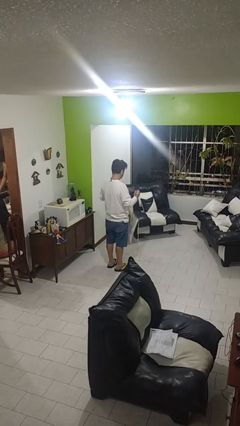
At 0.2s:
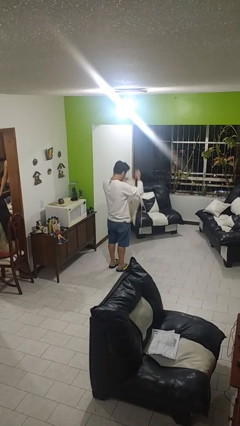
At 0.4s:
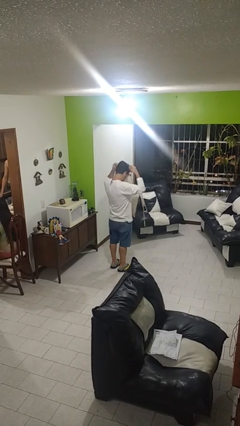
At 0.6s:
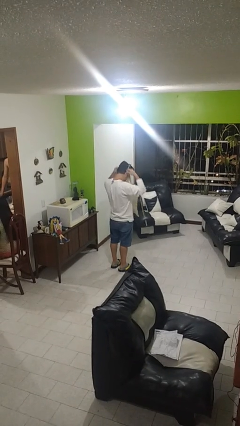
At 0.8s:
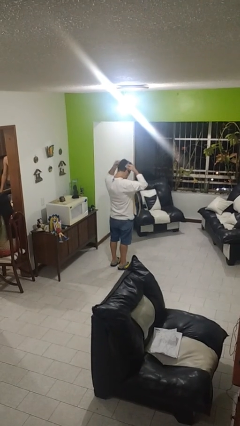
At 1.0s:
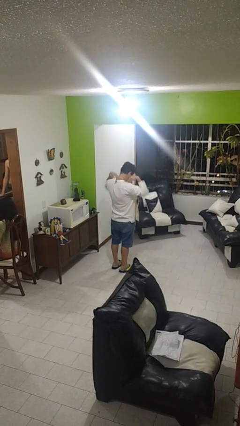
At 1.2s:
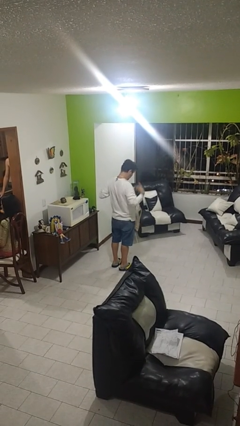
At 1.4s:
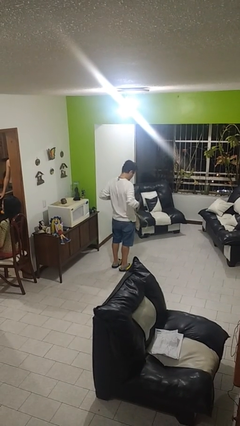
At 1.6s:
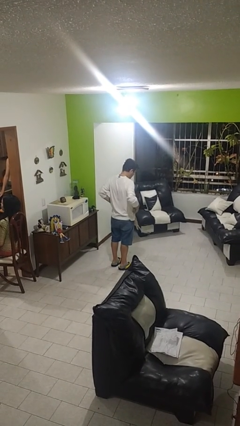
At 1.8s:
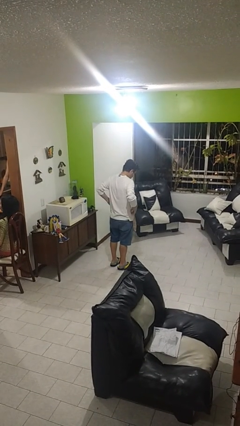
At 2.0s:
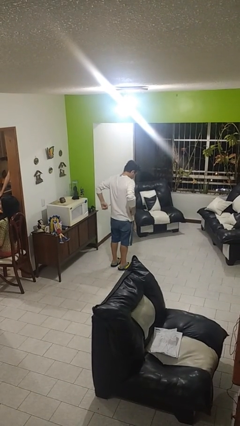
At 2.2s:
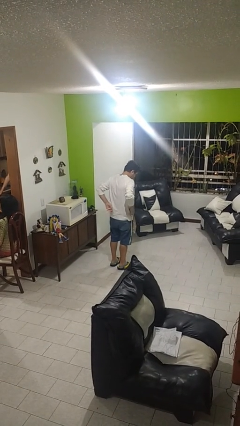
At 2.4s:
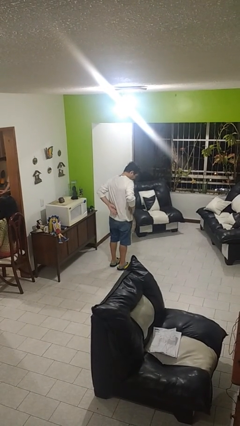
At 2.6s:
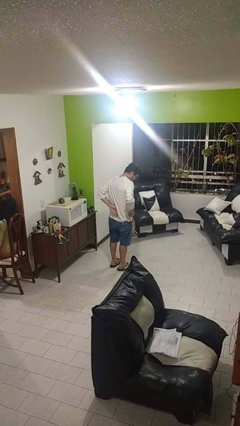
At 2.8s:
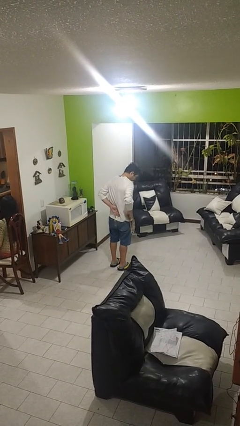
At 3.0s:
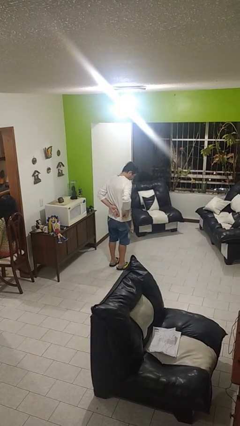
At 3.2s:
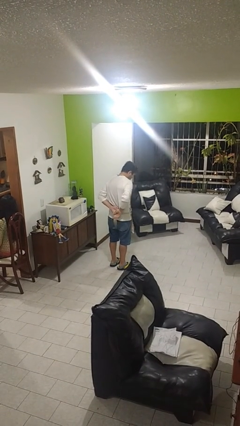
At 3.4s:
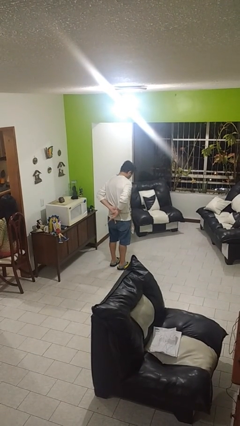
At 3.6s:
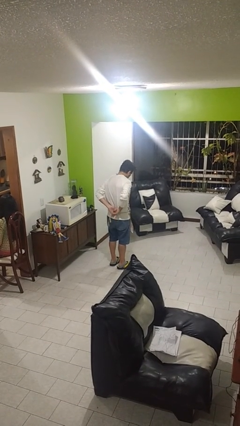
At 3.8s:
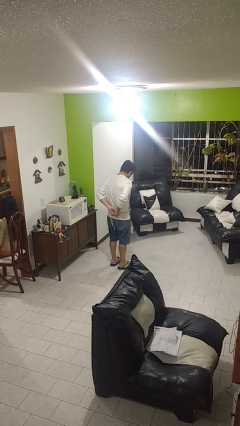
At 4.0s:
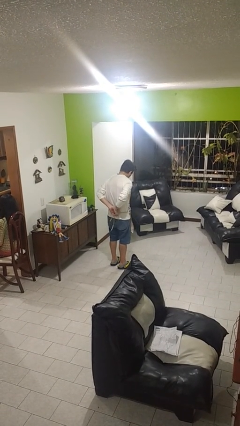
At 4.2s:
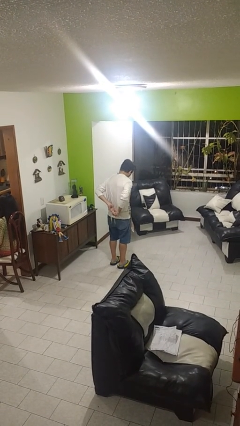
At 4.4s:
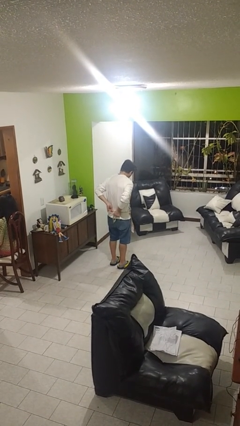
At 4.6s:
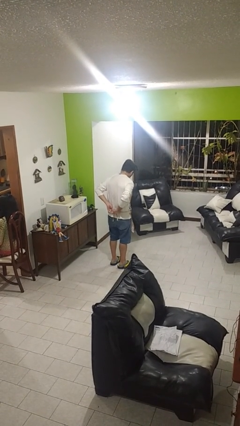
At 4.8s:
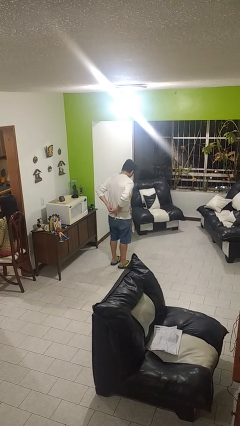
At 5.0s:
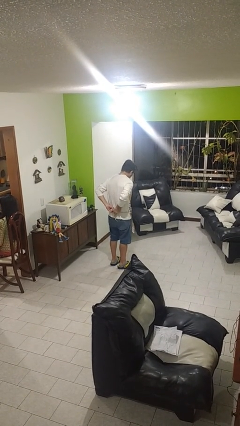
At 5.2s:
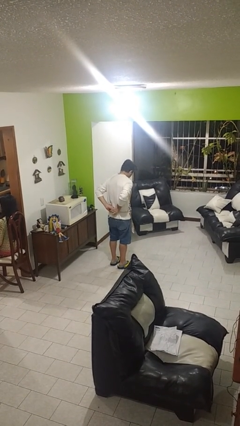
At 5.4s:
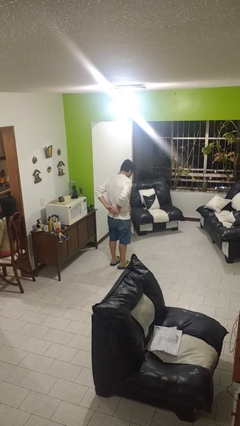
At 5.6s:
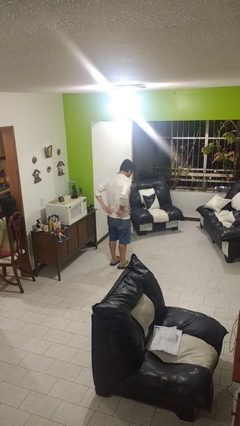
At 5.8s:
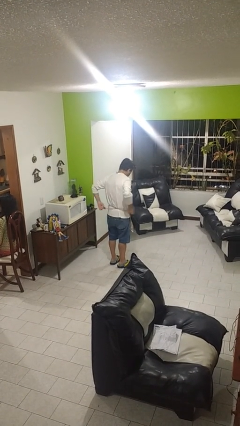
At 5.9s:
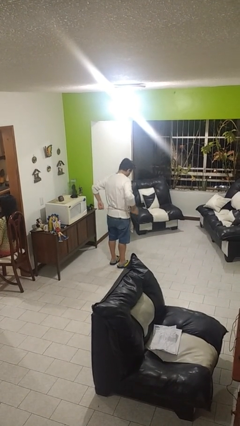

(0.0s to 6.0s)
person puts on apron

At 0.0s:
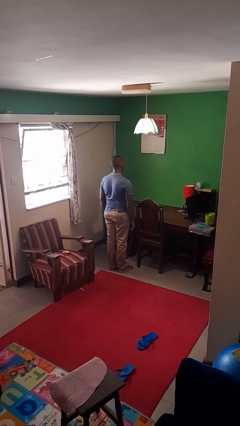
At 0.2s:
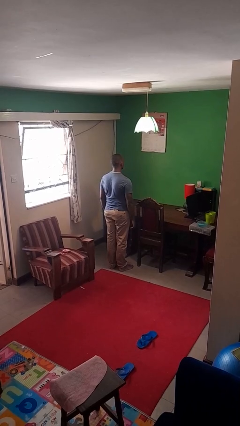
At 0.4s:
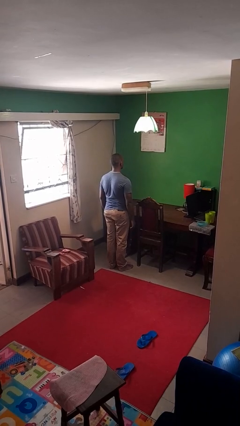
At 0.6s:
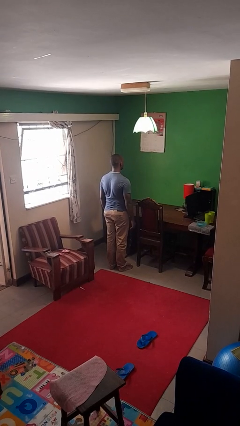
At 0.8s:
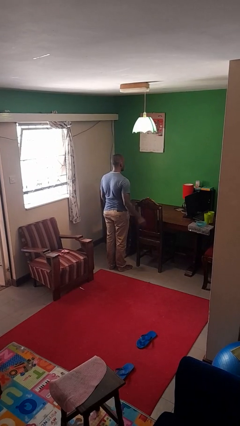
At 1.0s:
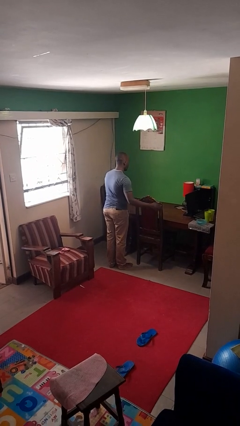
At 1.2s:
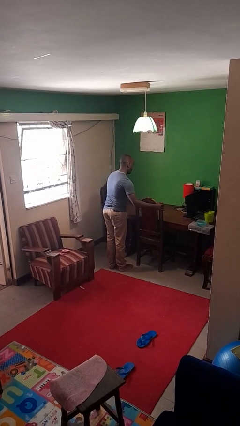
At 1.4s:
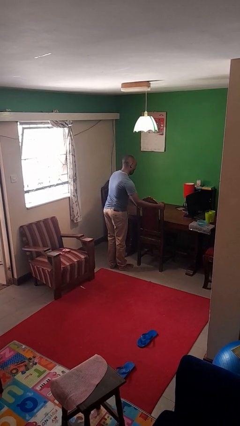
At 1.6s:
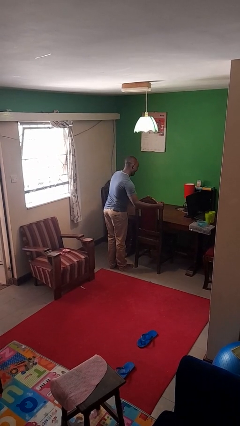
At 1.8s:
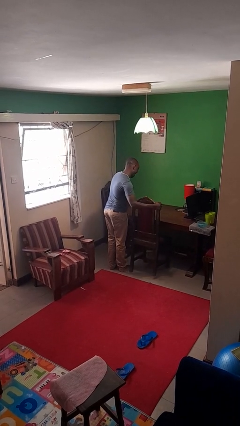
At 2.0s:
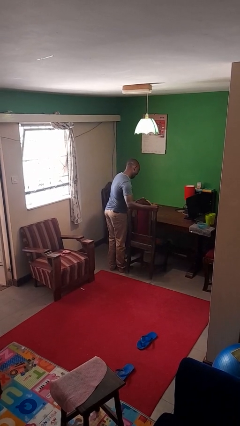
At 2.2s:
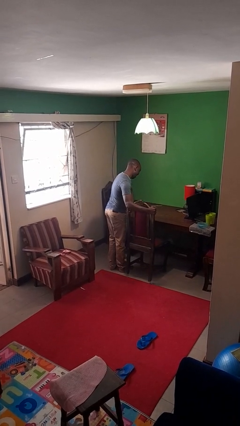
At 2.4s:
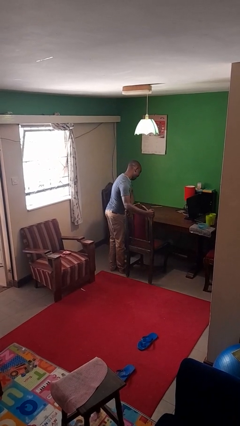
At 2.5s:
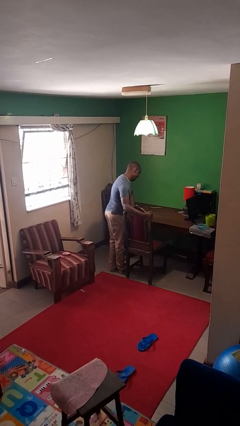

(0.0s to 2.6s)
person pulls out chair

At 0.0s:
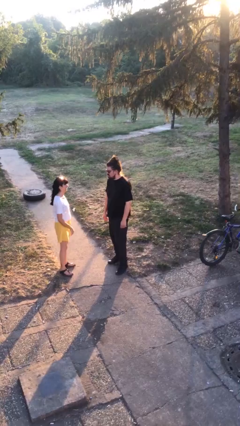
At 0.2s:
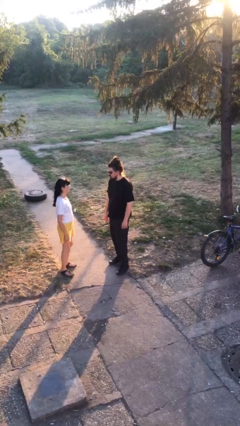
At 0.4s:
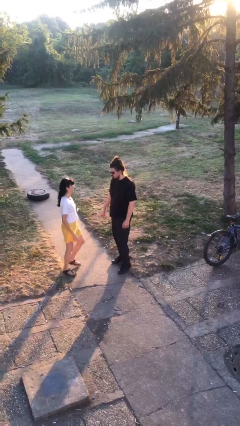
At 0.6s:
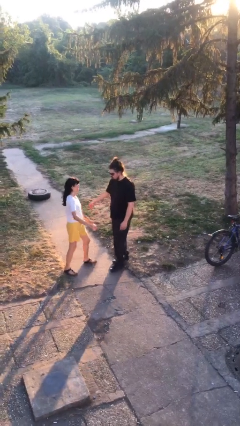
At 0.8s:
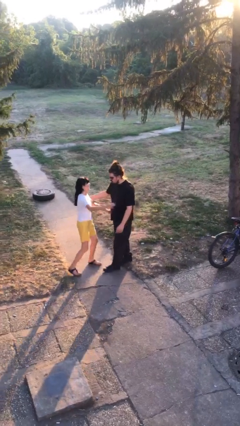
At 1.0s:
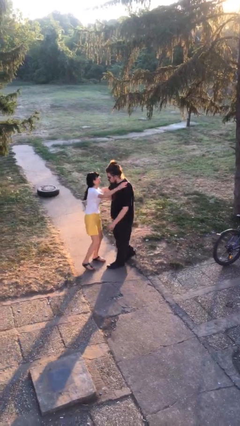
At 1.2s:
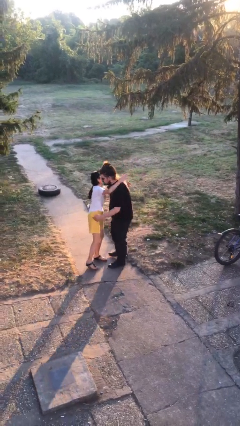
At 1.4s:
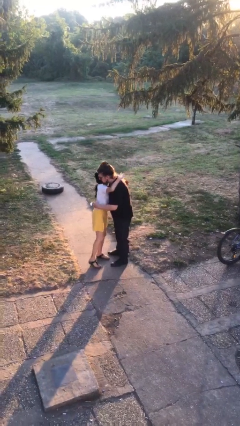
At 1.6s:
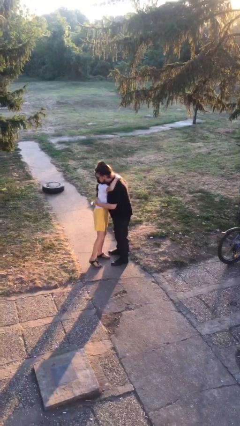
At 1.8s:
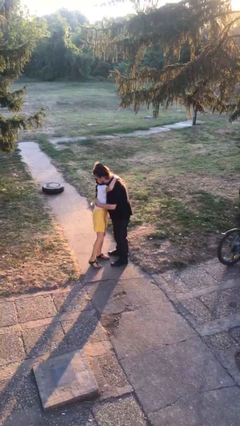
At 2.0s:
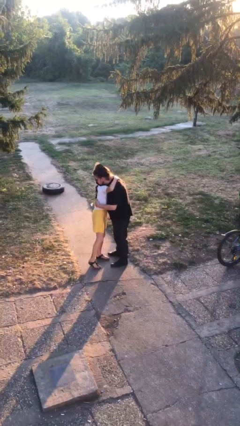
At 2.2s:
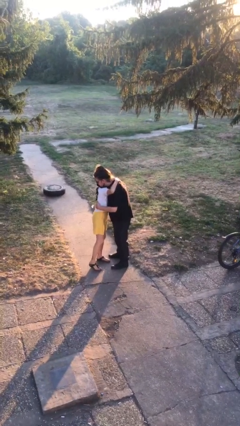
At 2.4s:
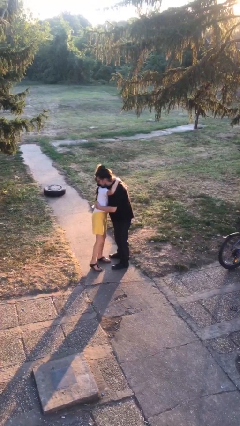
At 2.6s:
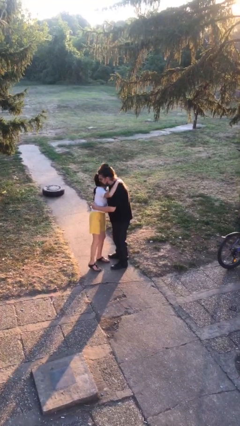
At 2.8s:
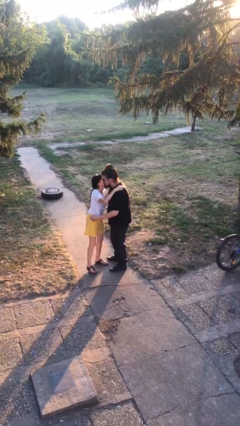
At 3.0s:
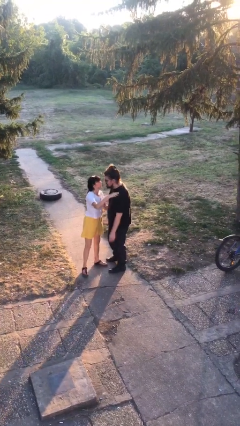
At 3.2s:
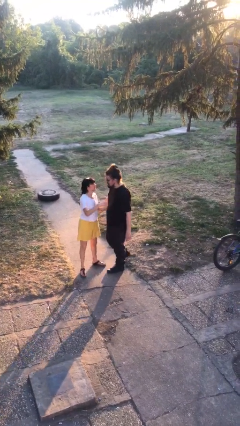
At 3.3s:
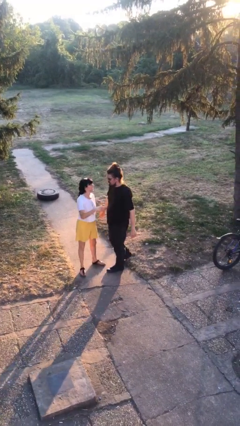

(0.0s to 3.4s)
person embraces person

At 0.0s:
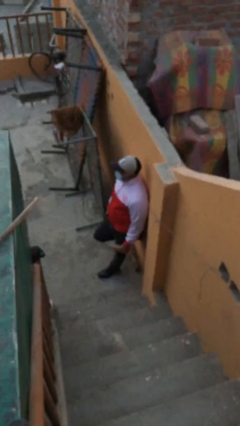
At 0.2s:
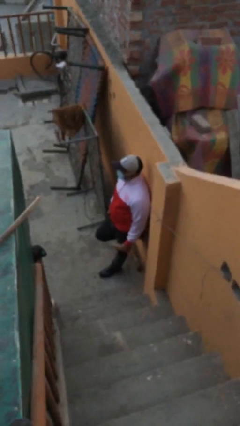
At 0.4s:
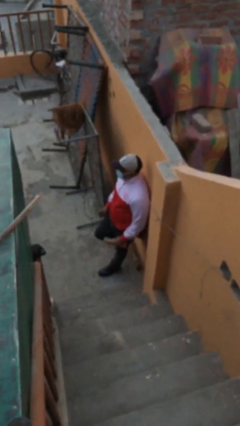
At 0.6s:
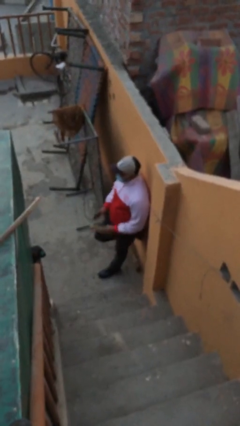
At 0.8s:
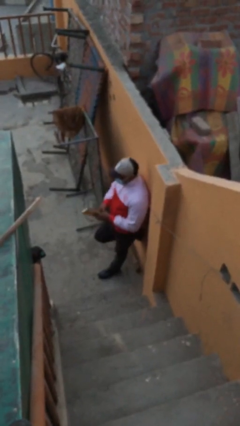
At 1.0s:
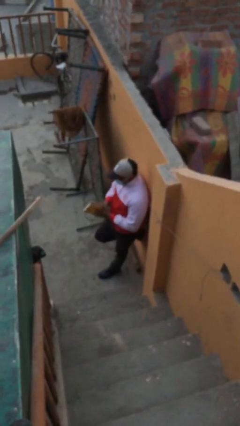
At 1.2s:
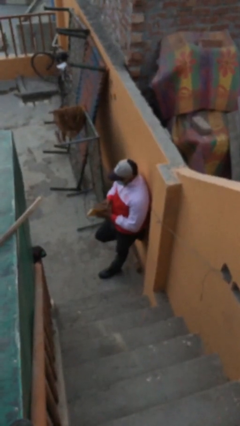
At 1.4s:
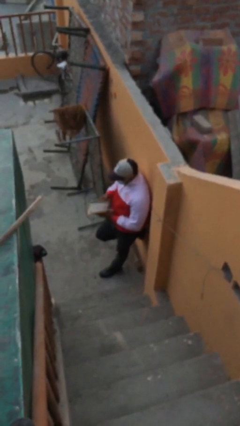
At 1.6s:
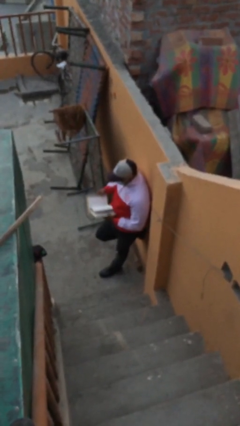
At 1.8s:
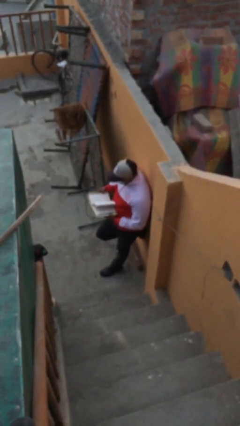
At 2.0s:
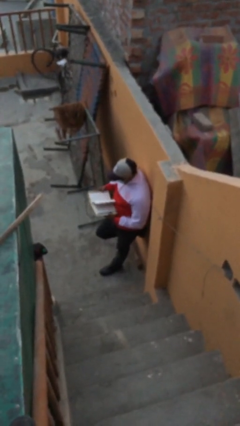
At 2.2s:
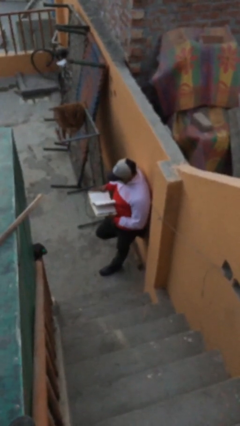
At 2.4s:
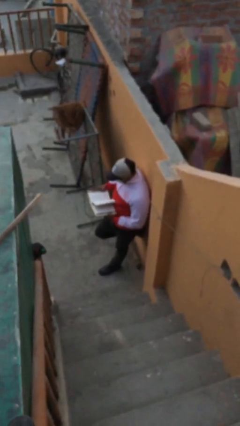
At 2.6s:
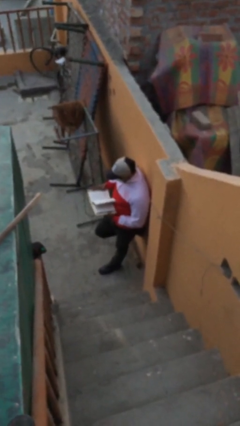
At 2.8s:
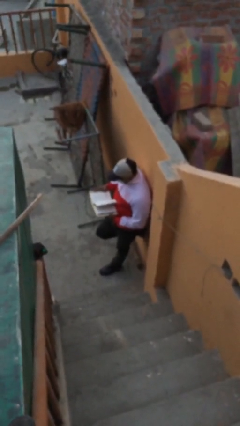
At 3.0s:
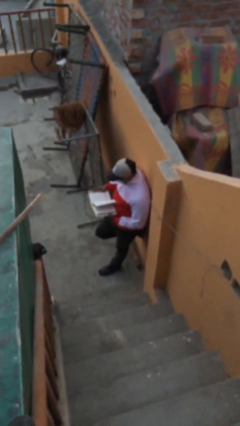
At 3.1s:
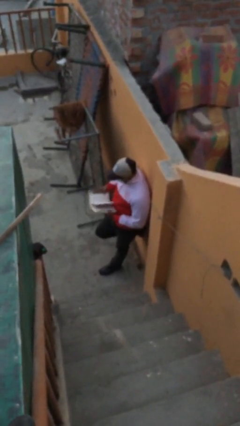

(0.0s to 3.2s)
person reads document

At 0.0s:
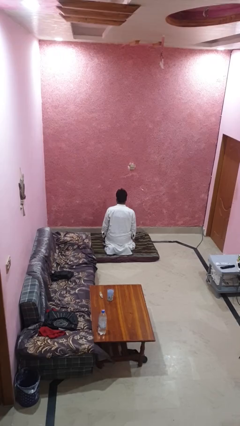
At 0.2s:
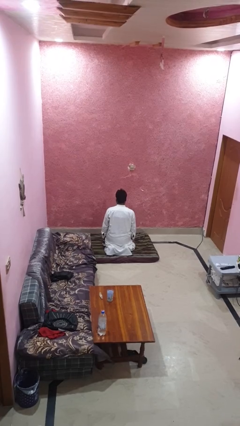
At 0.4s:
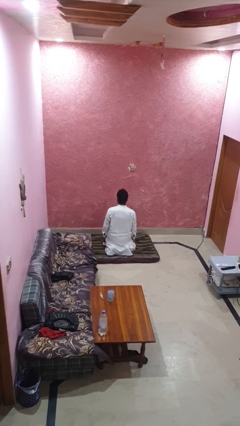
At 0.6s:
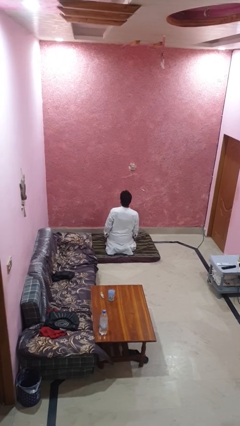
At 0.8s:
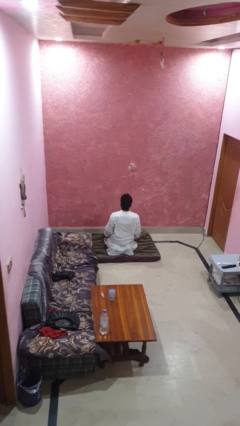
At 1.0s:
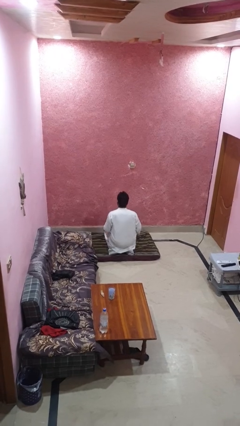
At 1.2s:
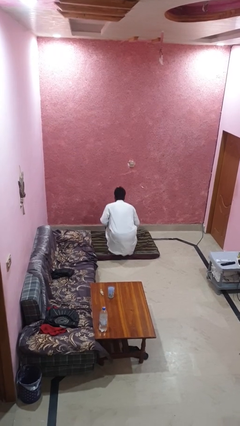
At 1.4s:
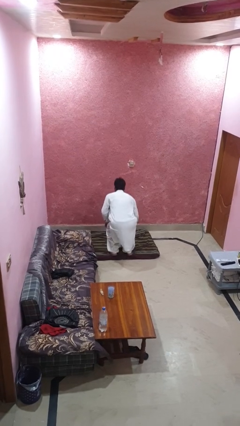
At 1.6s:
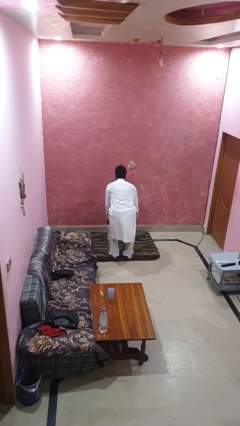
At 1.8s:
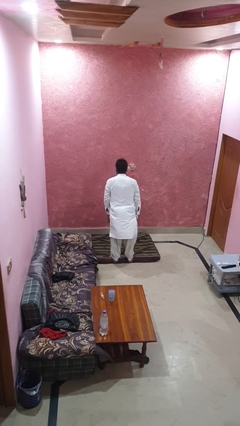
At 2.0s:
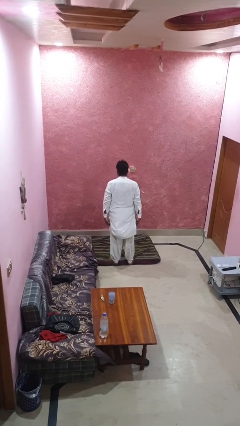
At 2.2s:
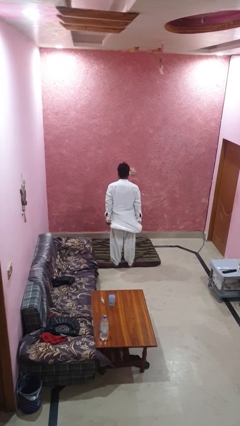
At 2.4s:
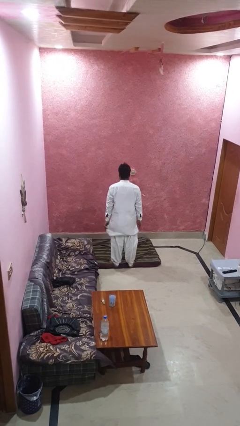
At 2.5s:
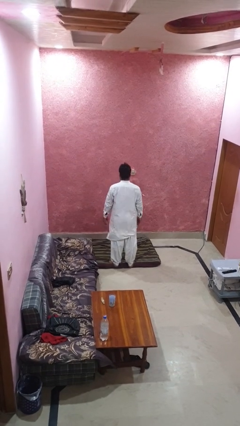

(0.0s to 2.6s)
person stands up from floor
